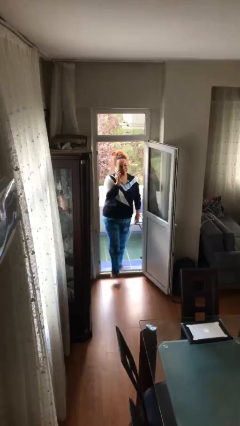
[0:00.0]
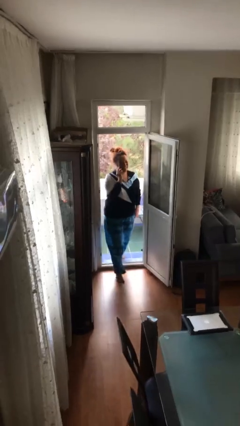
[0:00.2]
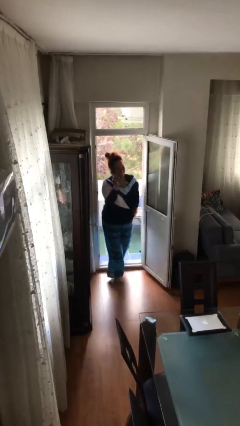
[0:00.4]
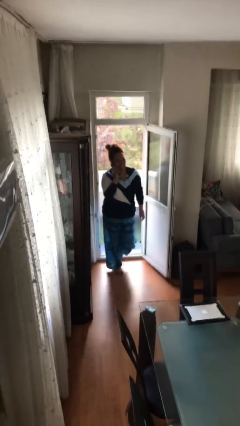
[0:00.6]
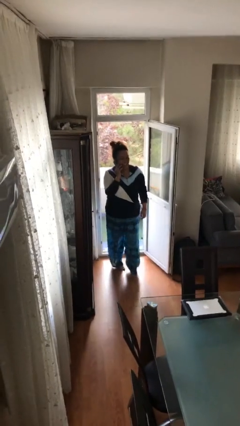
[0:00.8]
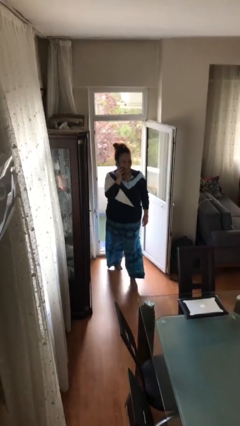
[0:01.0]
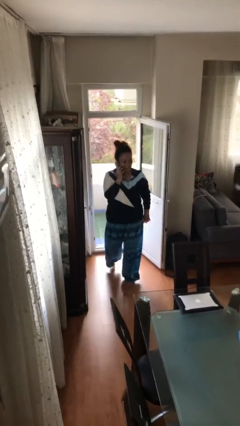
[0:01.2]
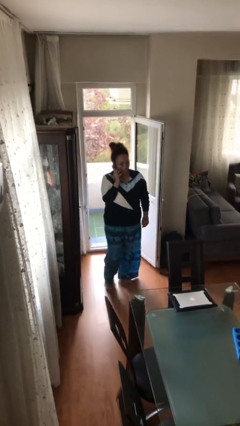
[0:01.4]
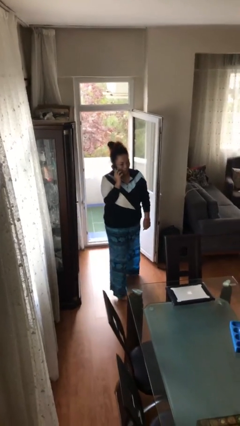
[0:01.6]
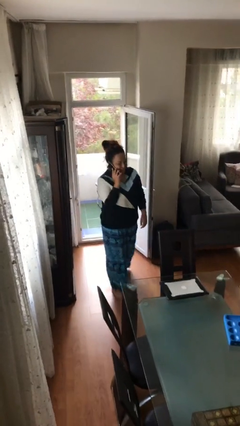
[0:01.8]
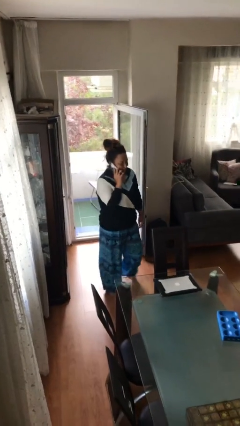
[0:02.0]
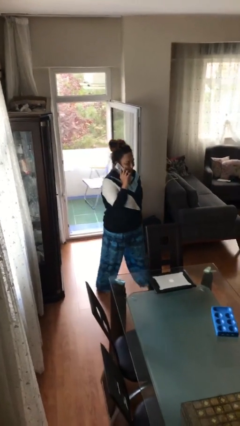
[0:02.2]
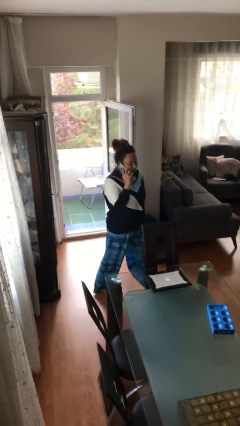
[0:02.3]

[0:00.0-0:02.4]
person enters scene through structure

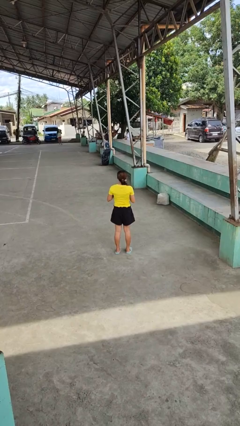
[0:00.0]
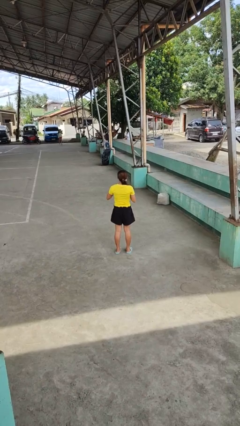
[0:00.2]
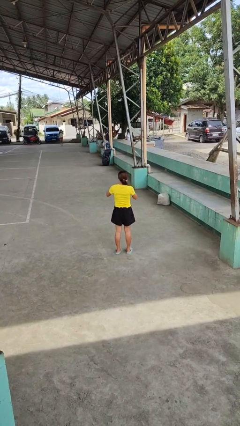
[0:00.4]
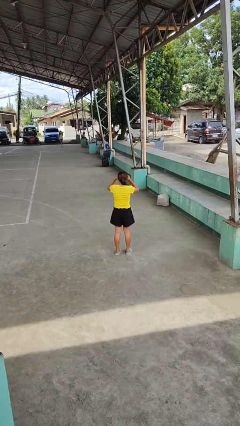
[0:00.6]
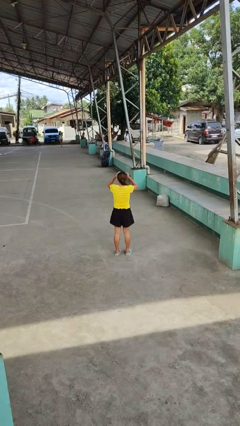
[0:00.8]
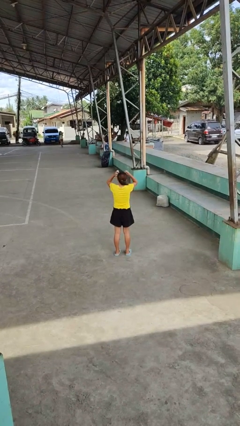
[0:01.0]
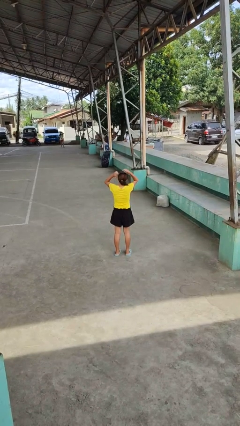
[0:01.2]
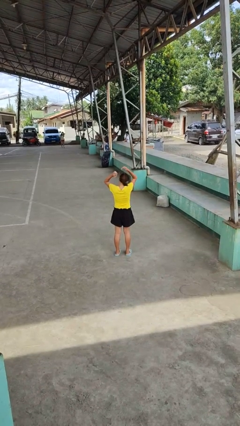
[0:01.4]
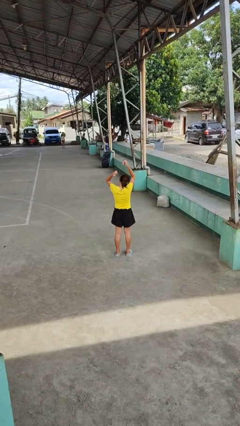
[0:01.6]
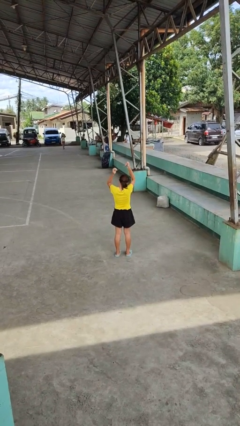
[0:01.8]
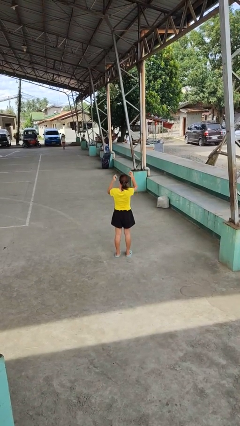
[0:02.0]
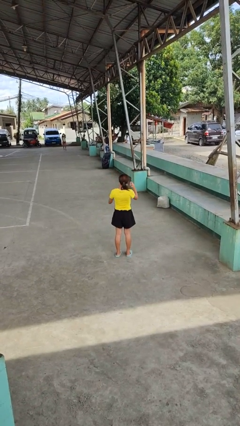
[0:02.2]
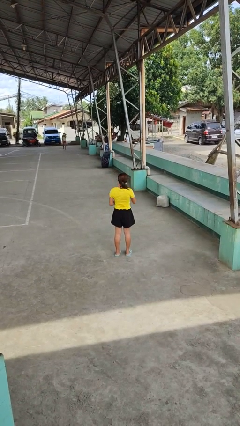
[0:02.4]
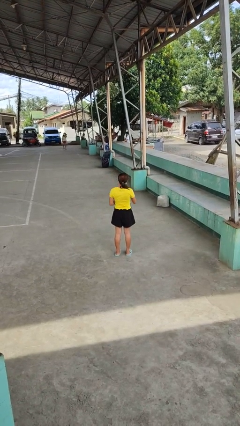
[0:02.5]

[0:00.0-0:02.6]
person takes off necklace

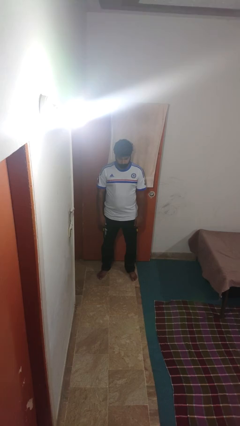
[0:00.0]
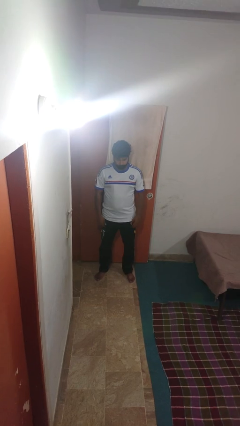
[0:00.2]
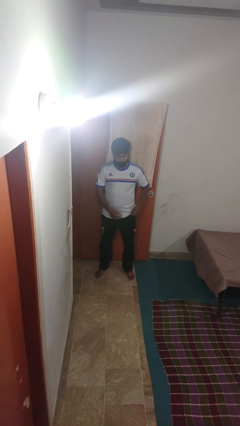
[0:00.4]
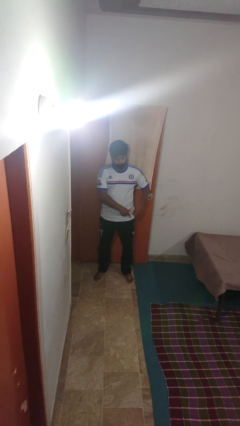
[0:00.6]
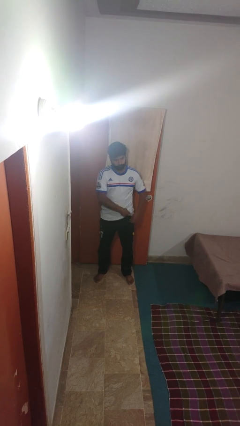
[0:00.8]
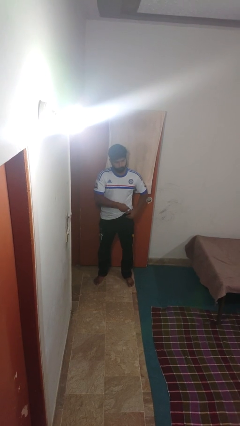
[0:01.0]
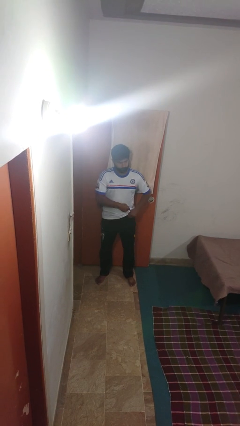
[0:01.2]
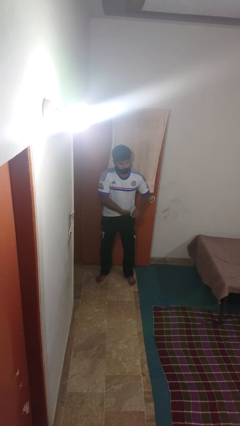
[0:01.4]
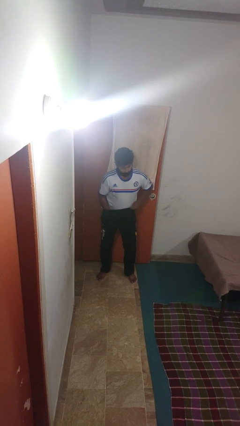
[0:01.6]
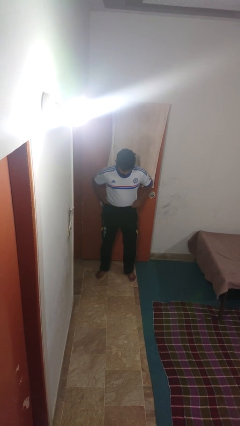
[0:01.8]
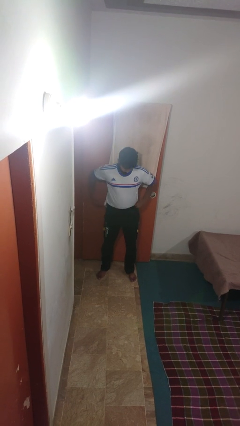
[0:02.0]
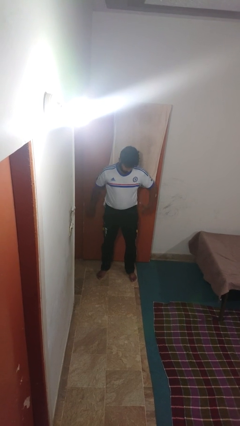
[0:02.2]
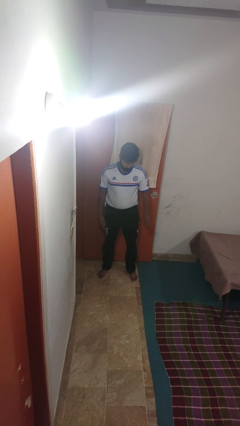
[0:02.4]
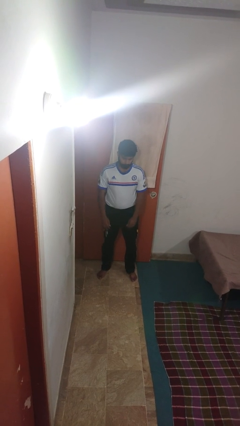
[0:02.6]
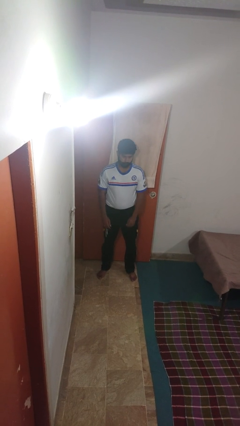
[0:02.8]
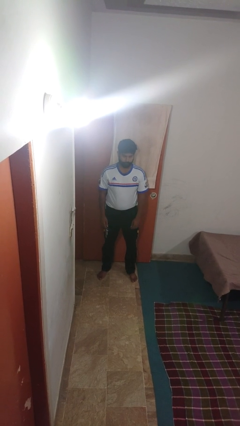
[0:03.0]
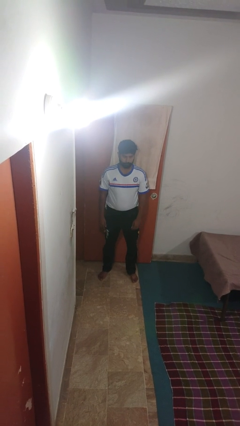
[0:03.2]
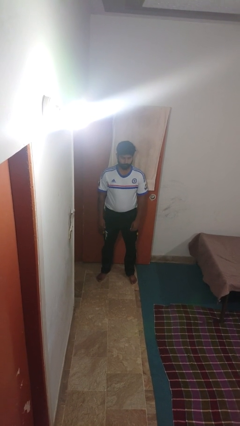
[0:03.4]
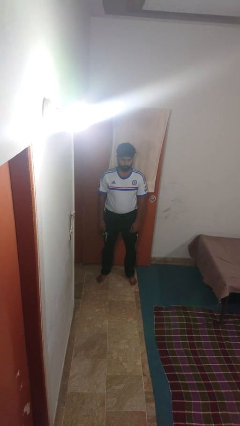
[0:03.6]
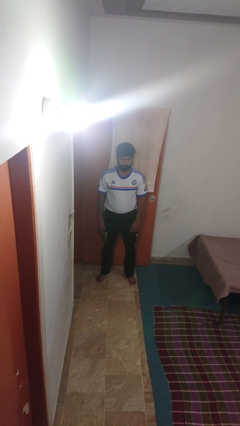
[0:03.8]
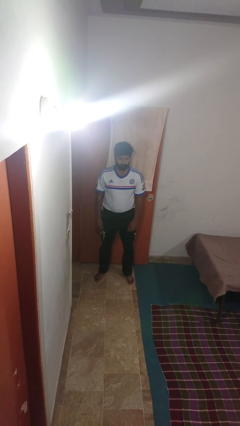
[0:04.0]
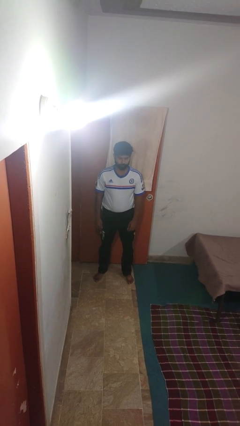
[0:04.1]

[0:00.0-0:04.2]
person tucks in shirt

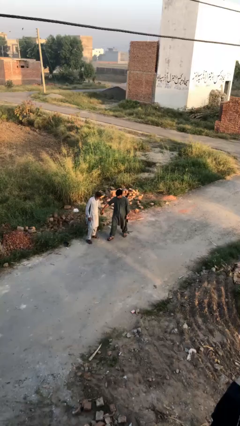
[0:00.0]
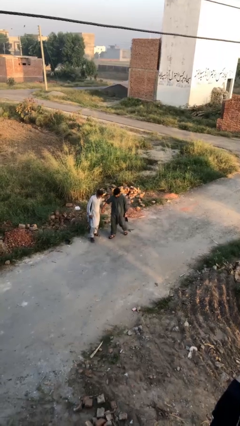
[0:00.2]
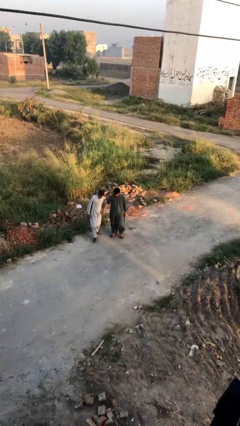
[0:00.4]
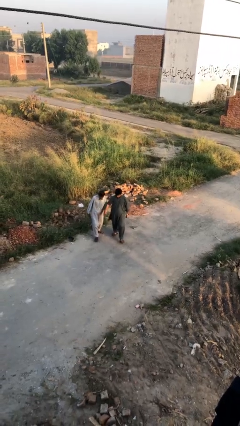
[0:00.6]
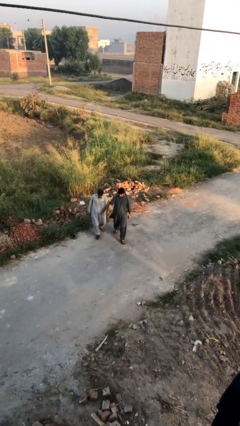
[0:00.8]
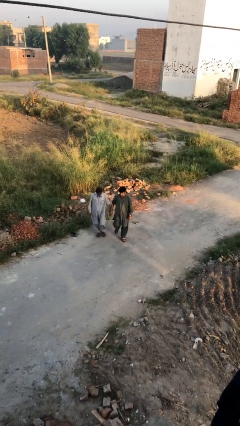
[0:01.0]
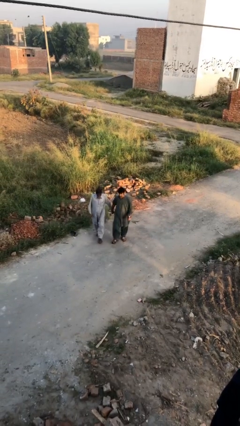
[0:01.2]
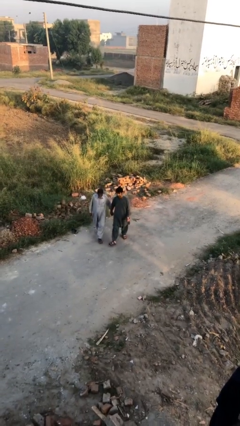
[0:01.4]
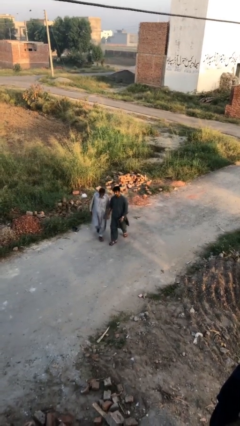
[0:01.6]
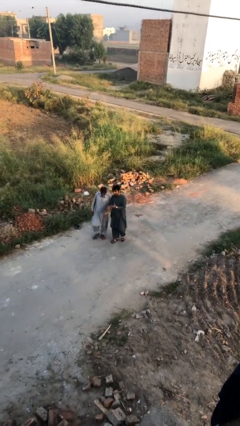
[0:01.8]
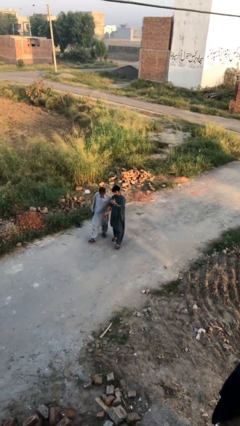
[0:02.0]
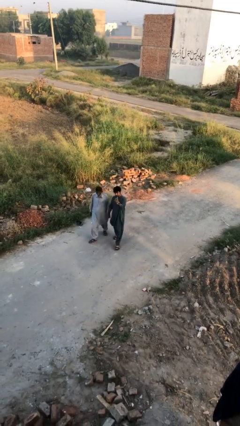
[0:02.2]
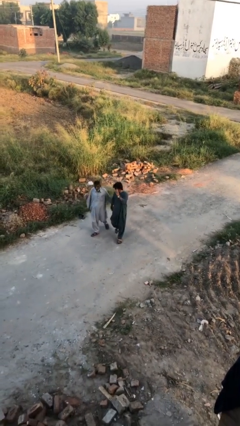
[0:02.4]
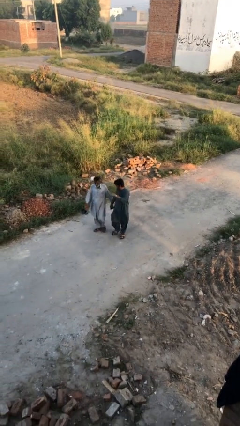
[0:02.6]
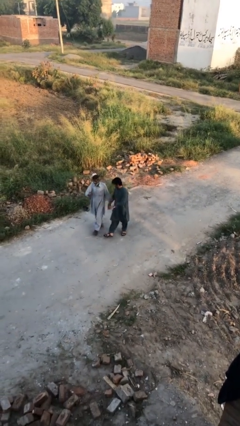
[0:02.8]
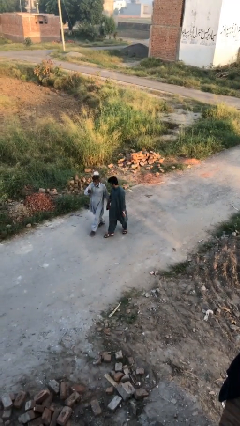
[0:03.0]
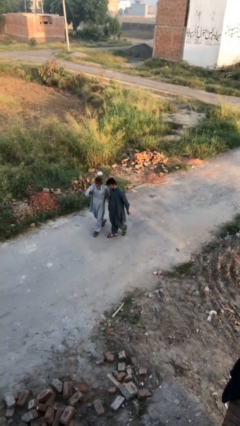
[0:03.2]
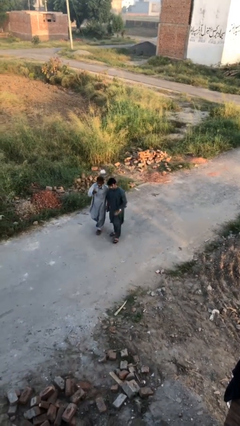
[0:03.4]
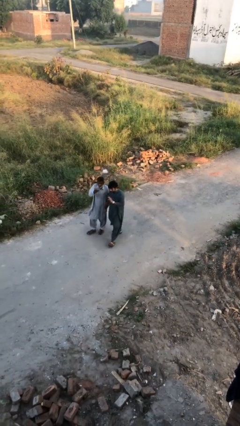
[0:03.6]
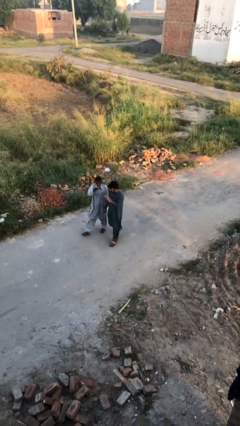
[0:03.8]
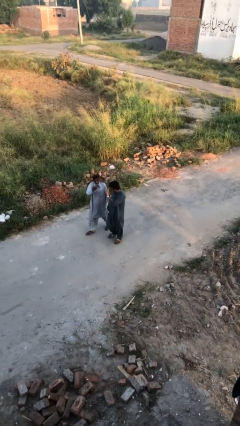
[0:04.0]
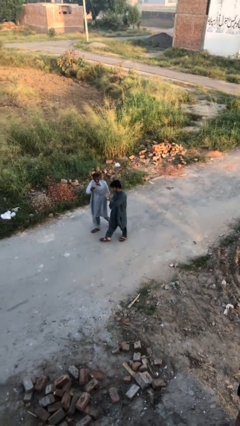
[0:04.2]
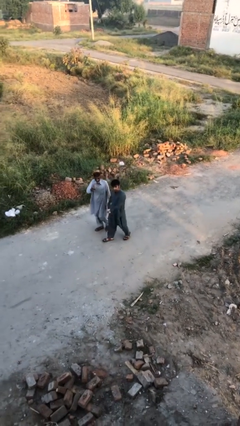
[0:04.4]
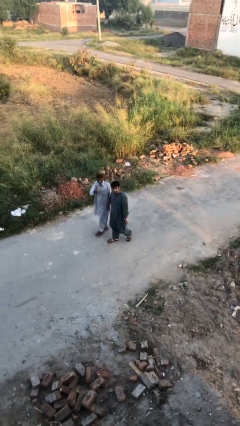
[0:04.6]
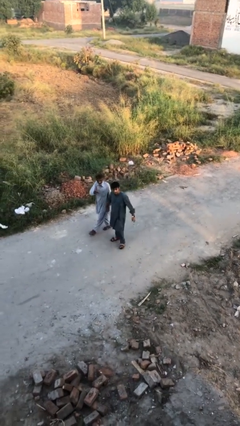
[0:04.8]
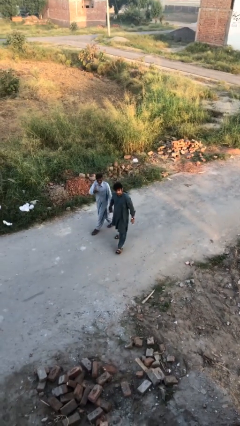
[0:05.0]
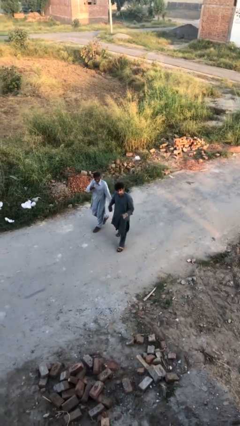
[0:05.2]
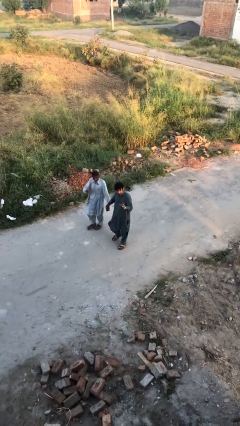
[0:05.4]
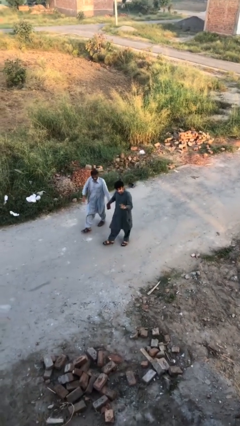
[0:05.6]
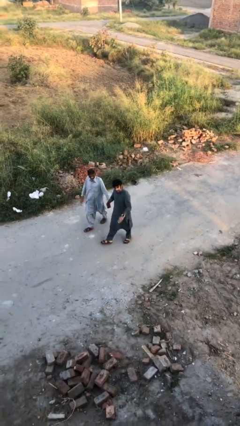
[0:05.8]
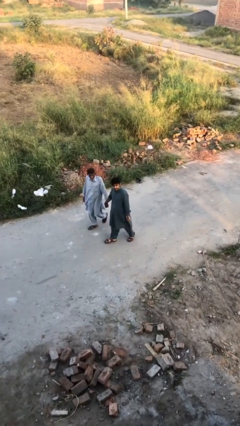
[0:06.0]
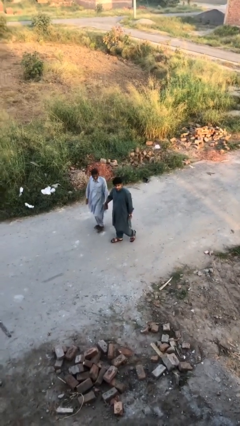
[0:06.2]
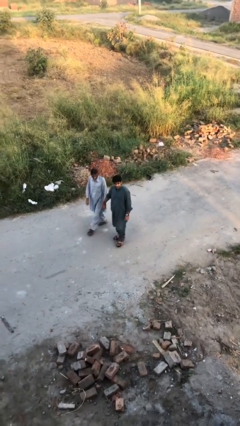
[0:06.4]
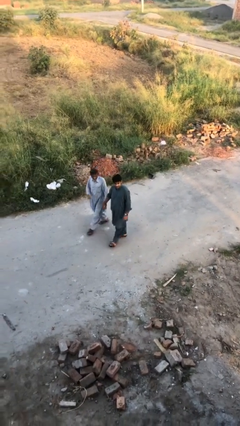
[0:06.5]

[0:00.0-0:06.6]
person holds hand

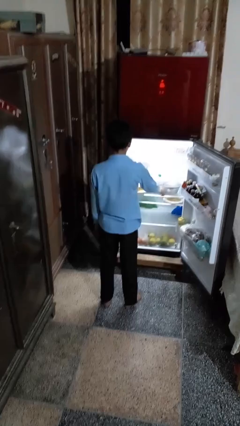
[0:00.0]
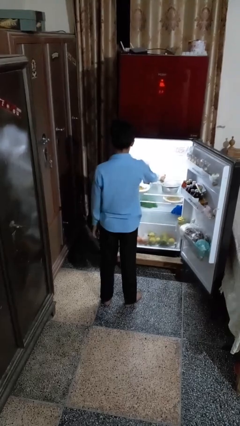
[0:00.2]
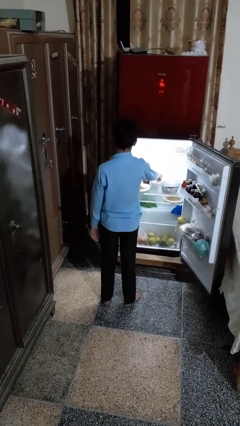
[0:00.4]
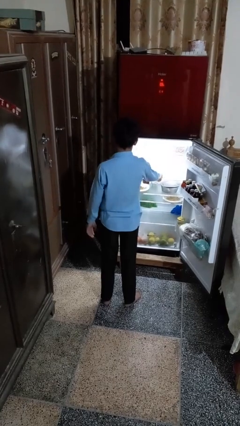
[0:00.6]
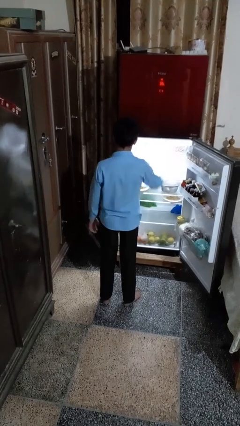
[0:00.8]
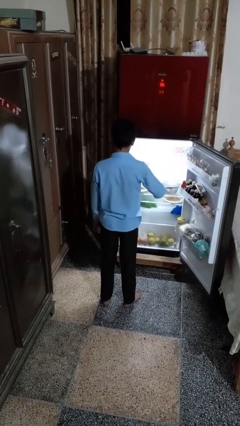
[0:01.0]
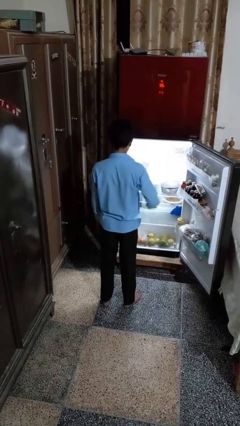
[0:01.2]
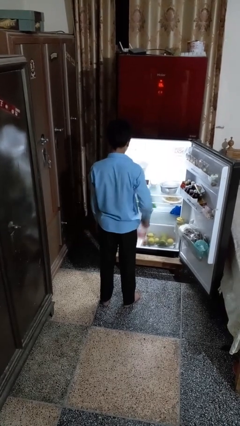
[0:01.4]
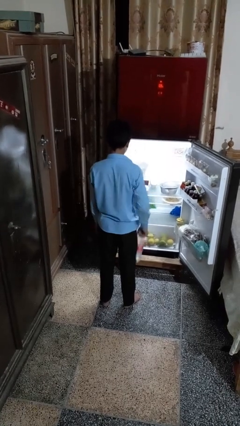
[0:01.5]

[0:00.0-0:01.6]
person takes object from refrigerator

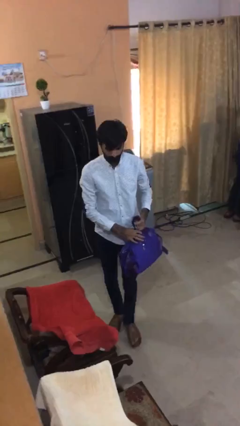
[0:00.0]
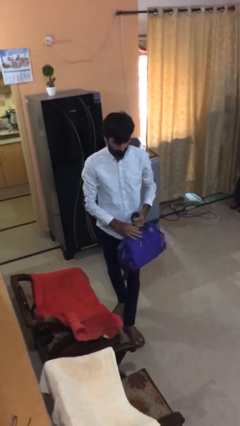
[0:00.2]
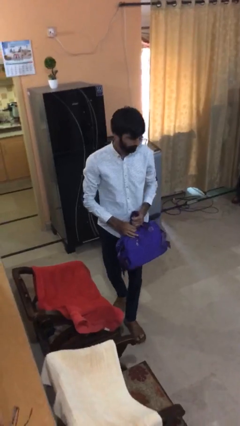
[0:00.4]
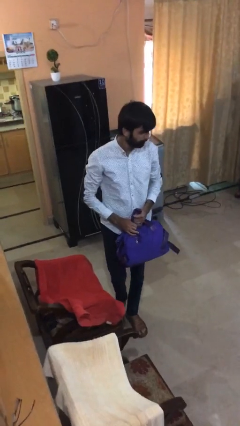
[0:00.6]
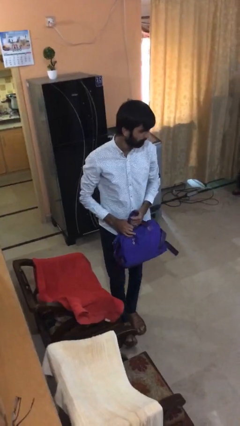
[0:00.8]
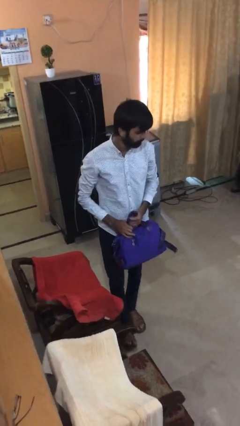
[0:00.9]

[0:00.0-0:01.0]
person steals object from person
